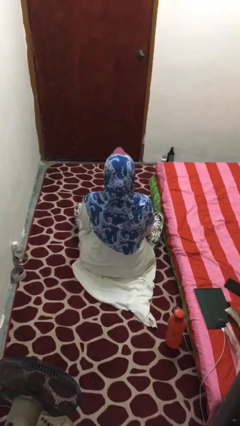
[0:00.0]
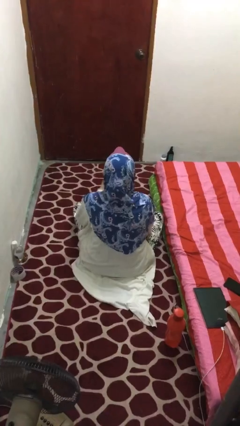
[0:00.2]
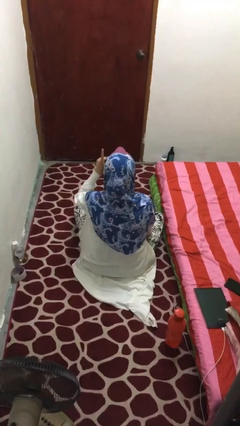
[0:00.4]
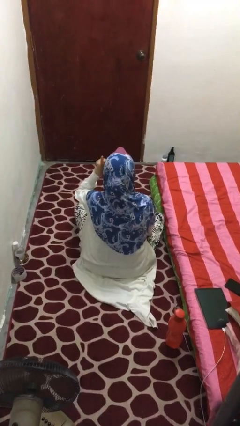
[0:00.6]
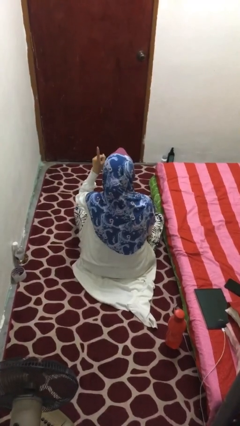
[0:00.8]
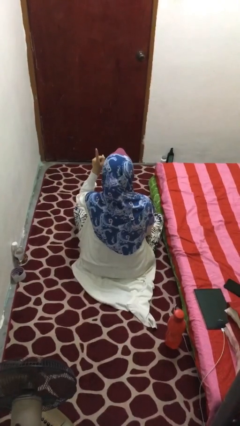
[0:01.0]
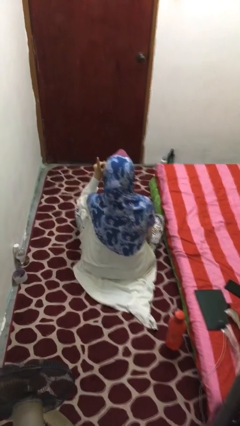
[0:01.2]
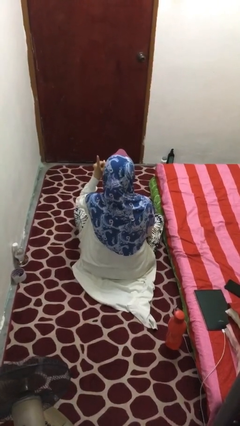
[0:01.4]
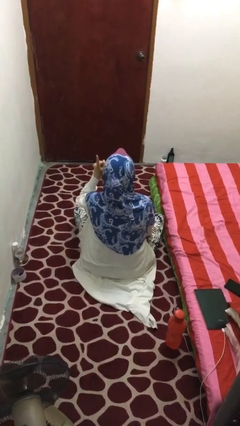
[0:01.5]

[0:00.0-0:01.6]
person gestures number one

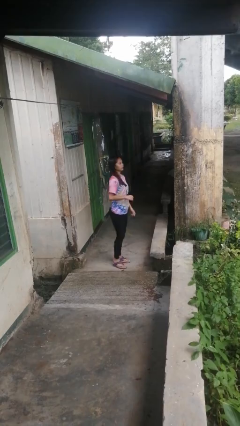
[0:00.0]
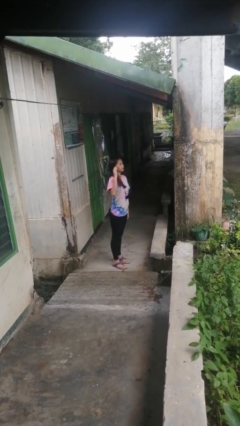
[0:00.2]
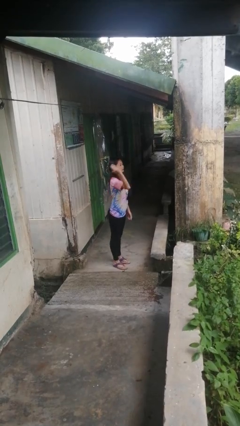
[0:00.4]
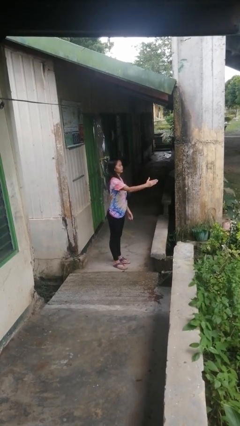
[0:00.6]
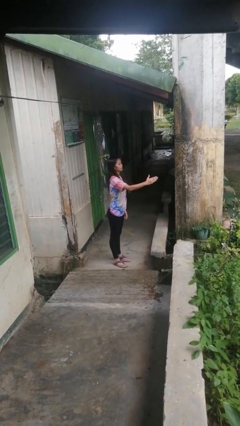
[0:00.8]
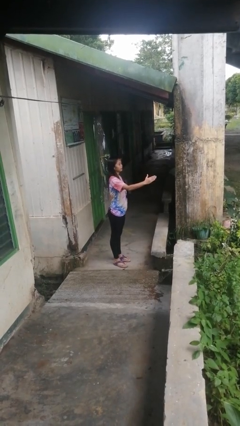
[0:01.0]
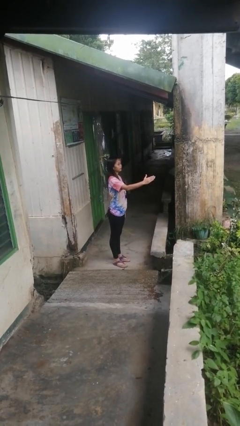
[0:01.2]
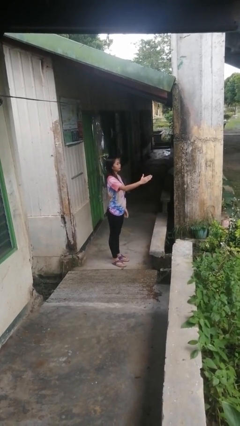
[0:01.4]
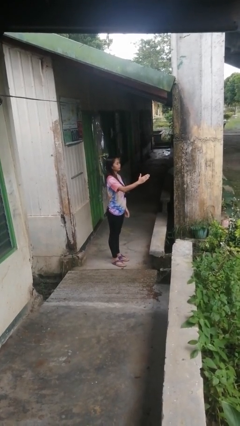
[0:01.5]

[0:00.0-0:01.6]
person karate chop

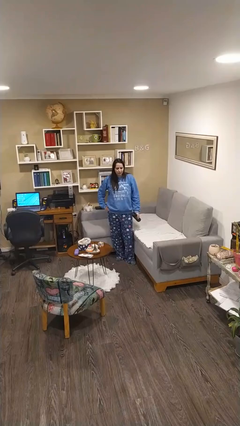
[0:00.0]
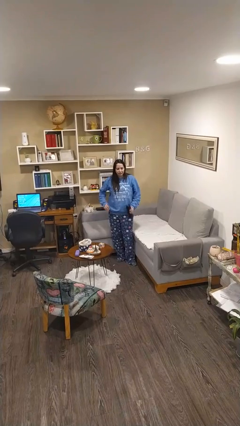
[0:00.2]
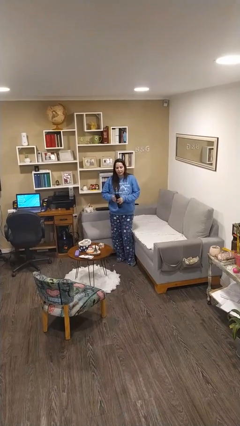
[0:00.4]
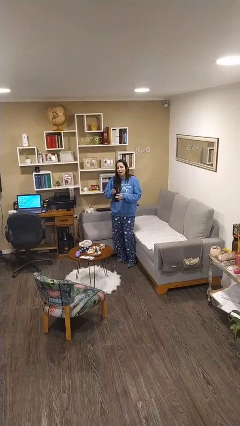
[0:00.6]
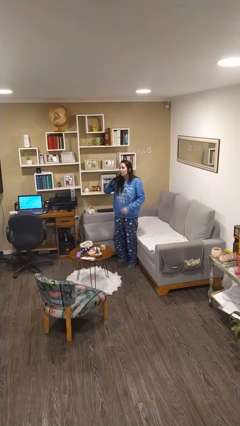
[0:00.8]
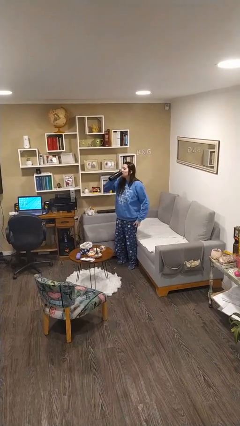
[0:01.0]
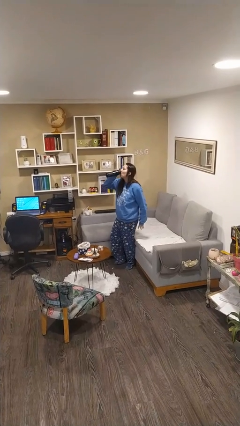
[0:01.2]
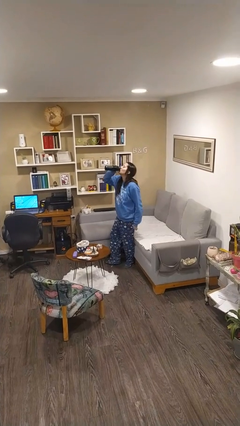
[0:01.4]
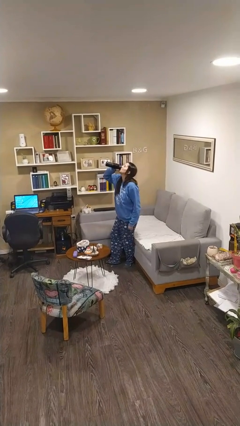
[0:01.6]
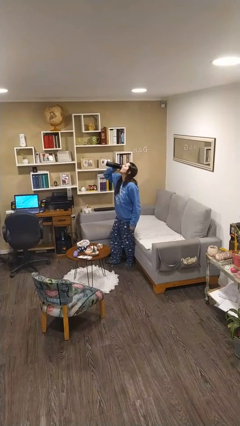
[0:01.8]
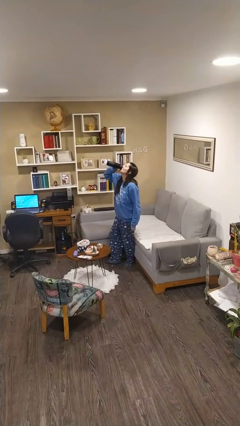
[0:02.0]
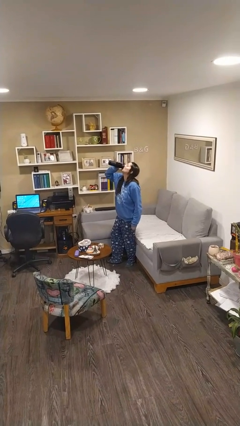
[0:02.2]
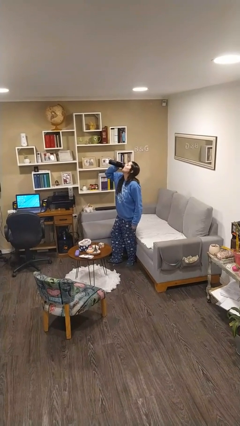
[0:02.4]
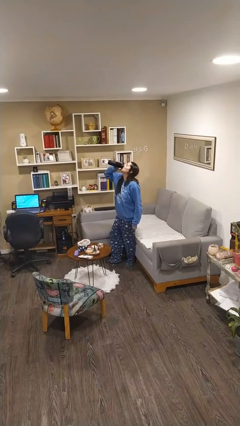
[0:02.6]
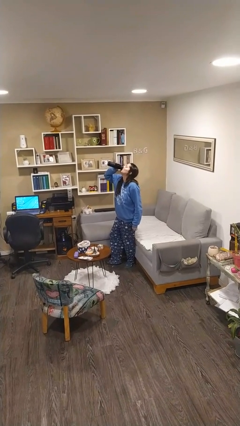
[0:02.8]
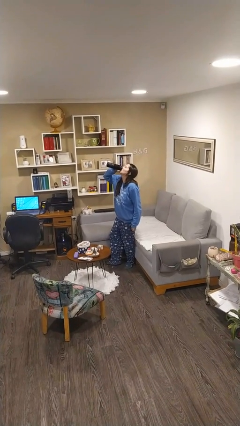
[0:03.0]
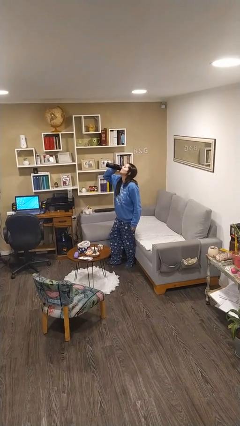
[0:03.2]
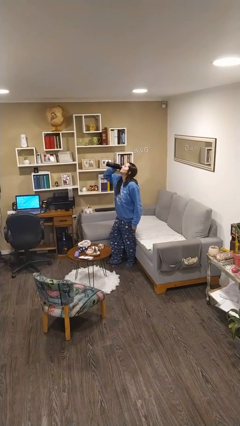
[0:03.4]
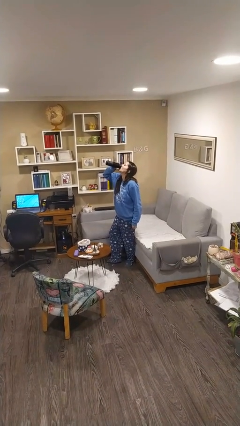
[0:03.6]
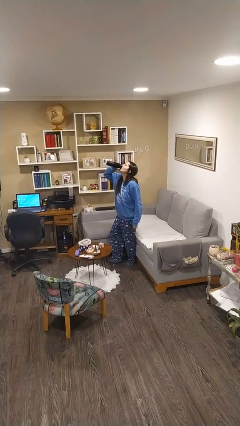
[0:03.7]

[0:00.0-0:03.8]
person drinks from bottle

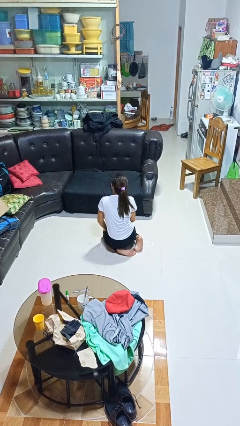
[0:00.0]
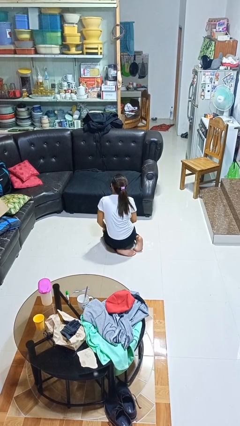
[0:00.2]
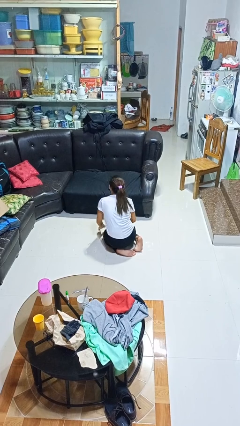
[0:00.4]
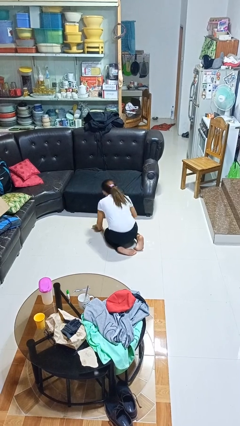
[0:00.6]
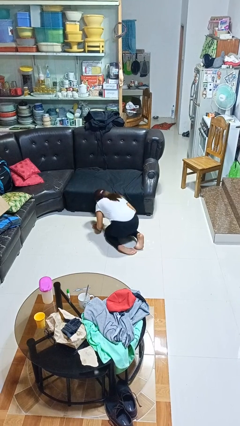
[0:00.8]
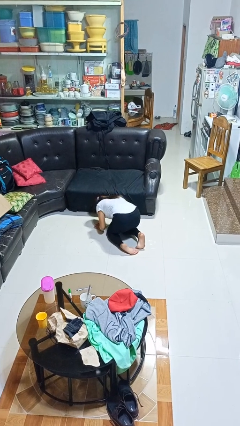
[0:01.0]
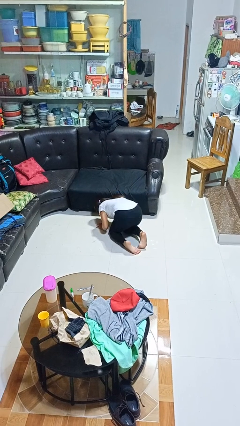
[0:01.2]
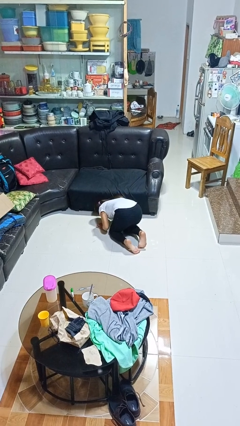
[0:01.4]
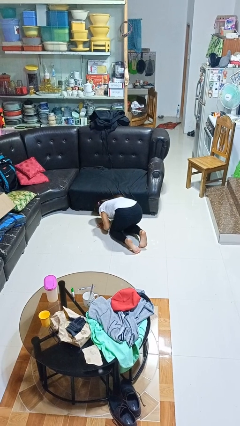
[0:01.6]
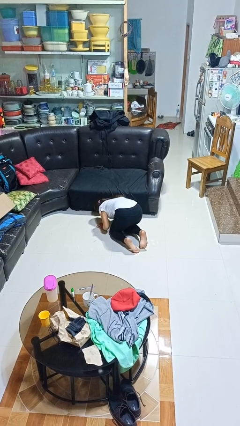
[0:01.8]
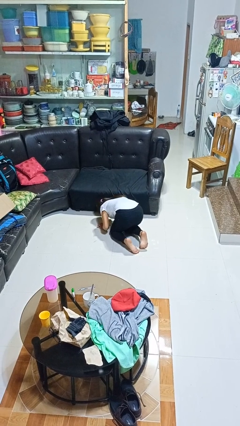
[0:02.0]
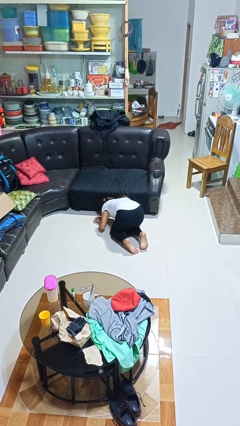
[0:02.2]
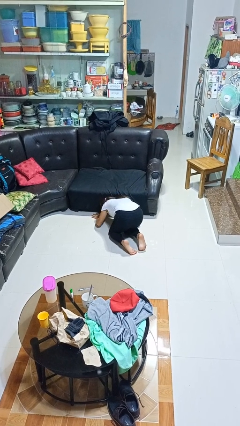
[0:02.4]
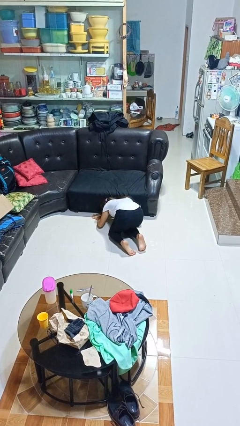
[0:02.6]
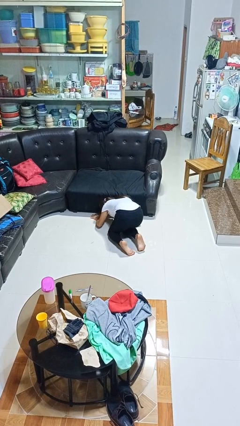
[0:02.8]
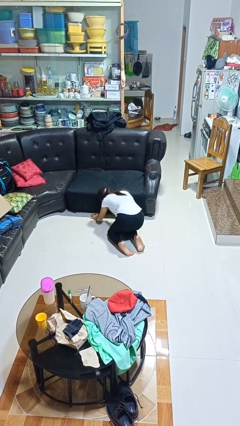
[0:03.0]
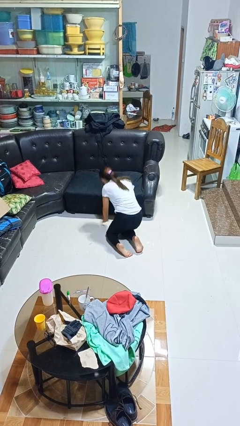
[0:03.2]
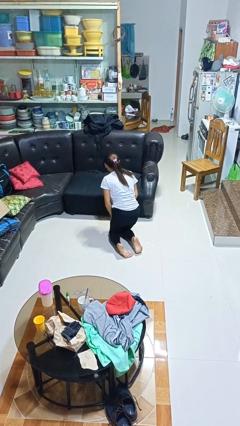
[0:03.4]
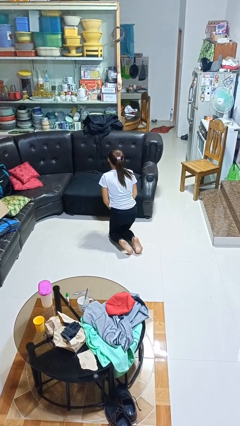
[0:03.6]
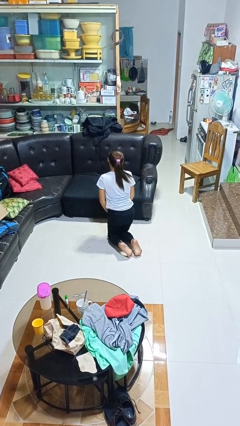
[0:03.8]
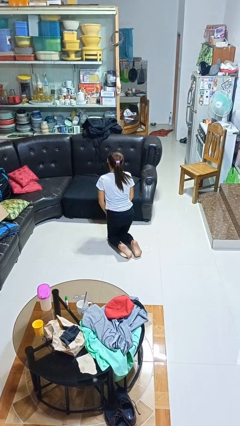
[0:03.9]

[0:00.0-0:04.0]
person searches under couch

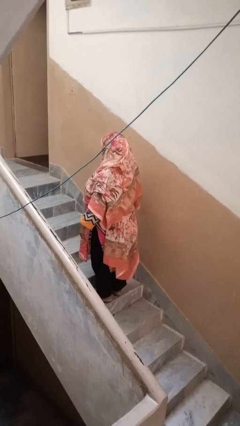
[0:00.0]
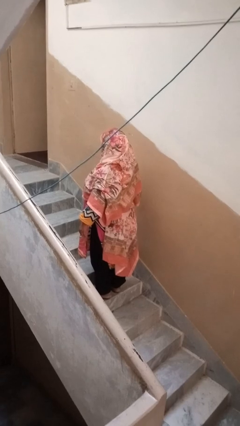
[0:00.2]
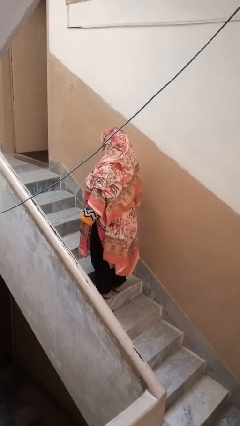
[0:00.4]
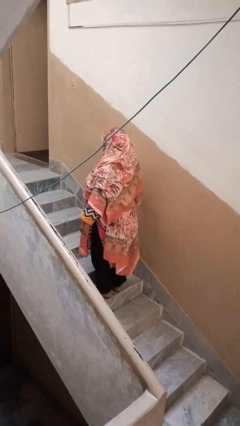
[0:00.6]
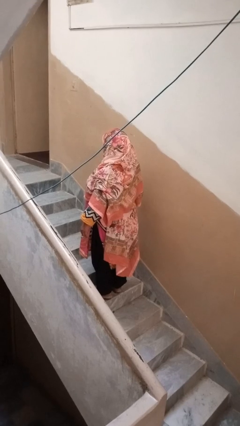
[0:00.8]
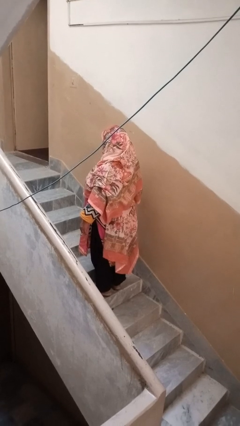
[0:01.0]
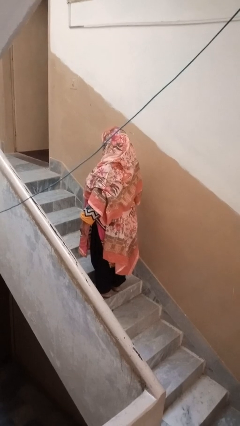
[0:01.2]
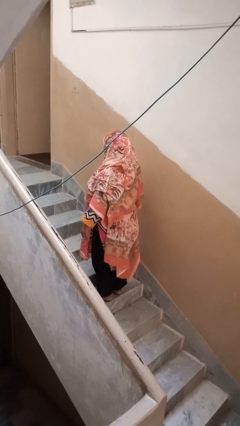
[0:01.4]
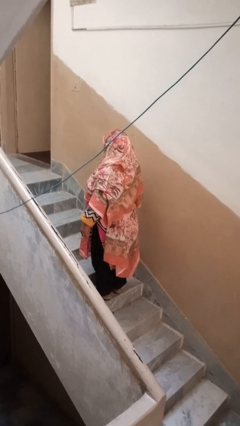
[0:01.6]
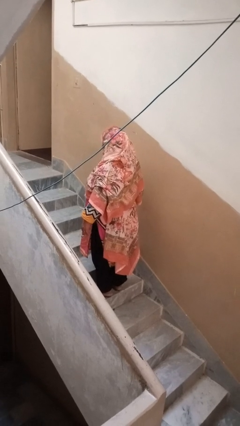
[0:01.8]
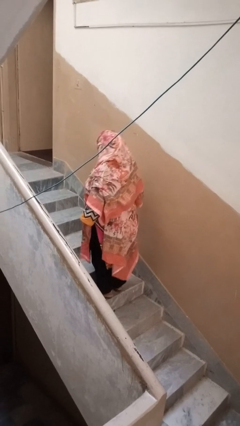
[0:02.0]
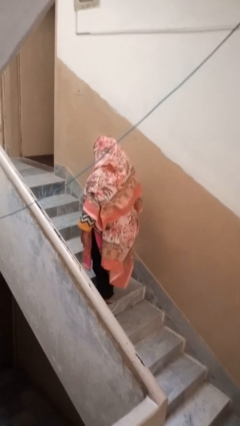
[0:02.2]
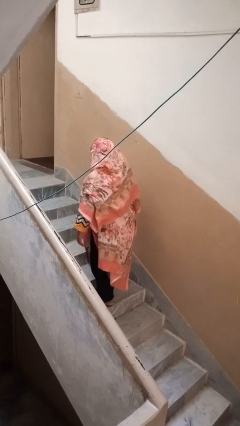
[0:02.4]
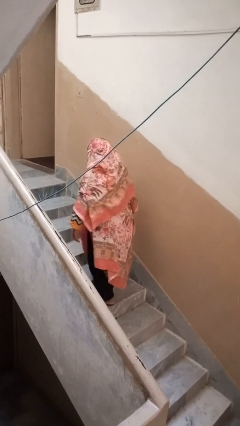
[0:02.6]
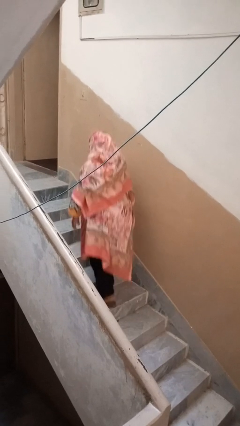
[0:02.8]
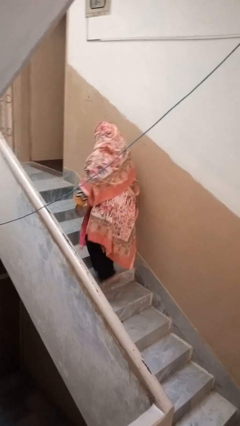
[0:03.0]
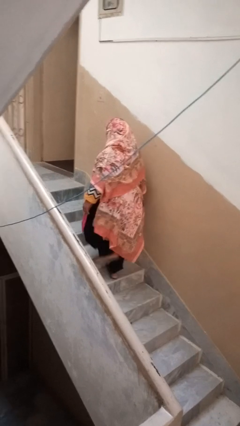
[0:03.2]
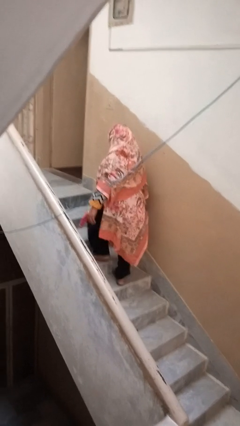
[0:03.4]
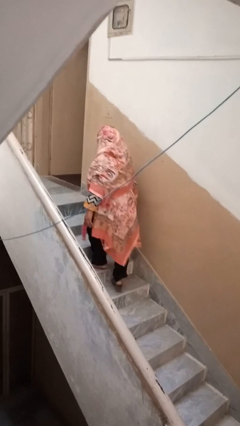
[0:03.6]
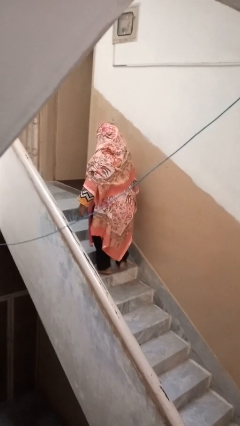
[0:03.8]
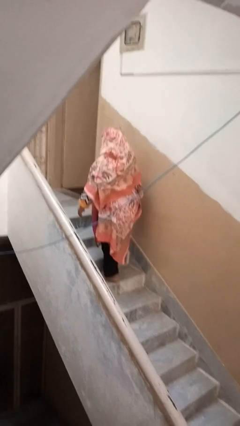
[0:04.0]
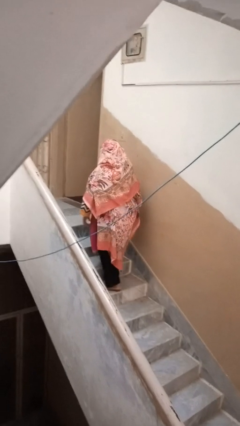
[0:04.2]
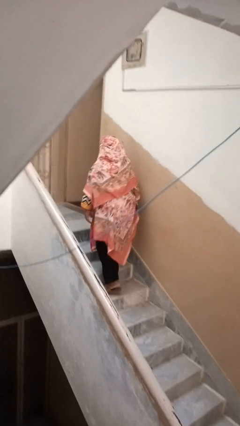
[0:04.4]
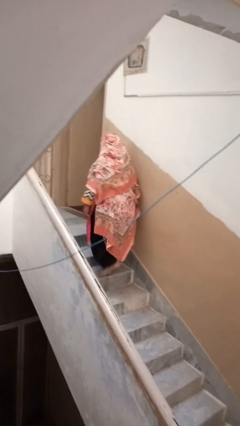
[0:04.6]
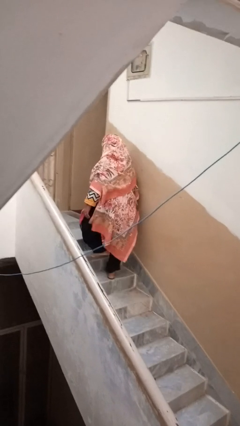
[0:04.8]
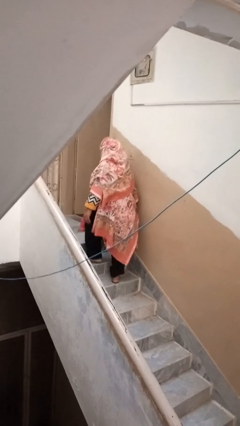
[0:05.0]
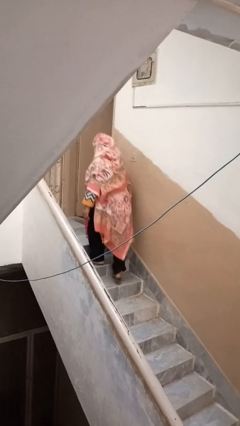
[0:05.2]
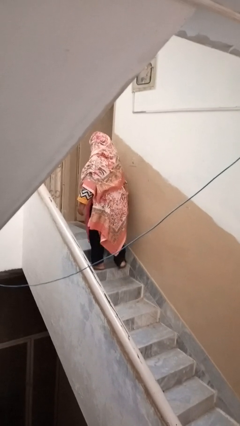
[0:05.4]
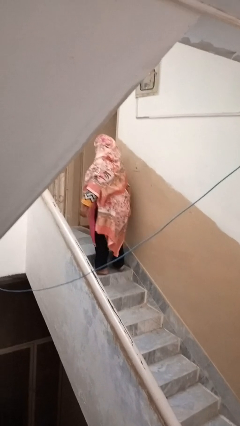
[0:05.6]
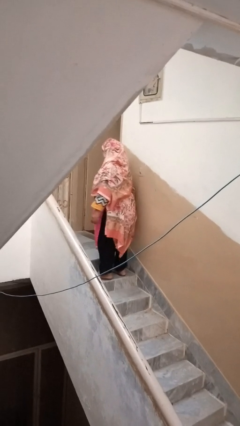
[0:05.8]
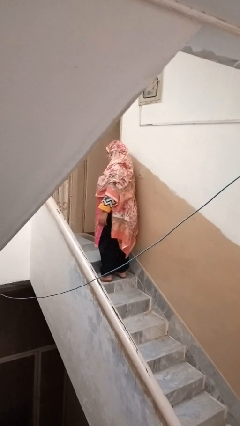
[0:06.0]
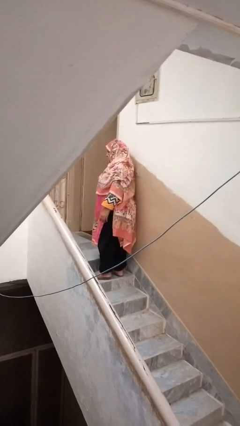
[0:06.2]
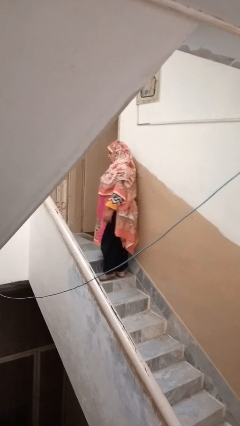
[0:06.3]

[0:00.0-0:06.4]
person climbs up stairs
